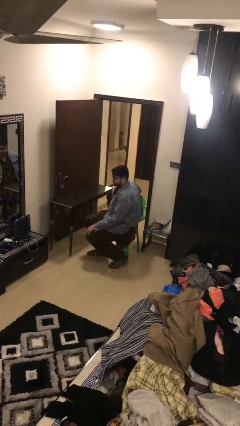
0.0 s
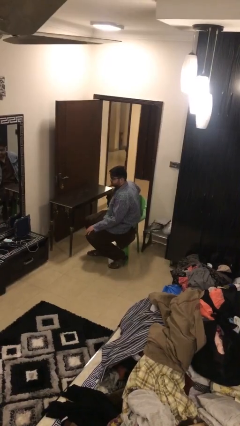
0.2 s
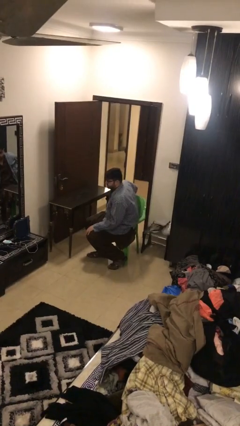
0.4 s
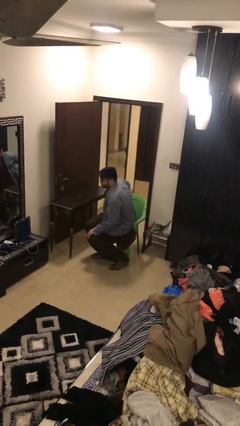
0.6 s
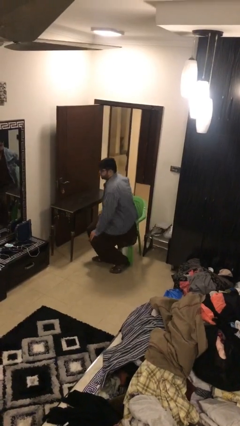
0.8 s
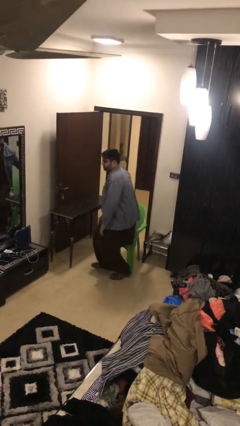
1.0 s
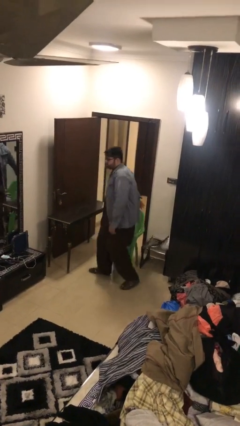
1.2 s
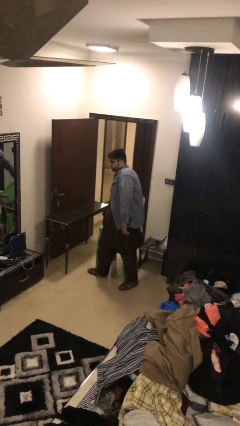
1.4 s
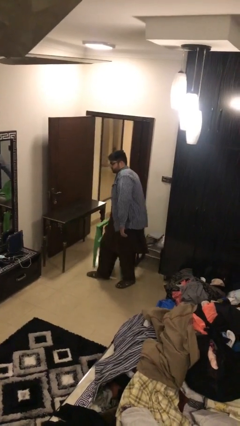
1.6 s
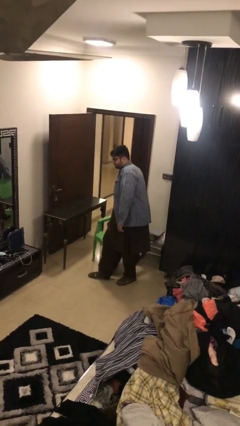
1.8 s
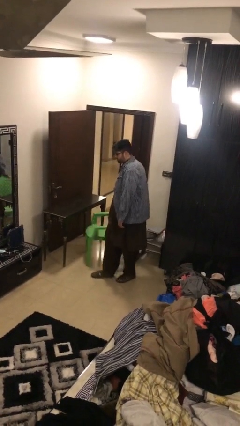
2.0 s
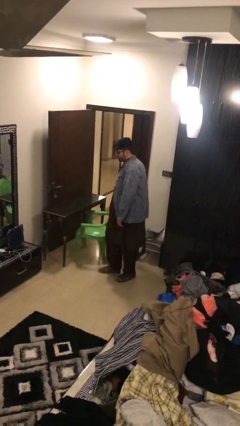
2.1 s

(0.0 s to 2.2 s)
person stands up

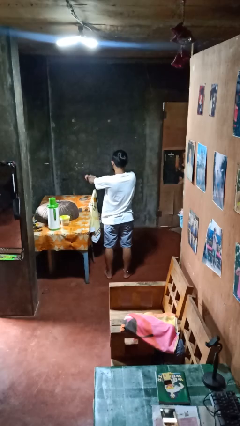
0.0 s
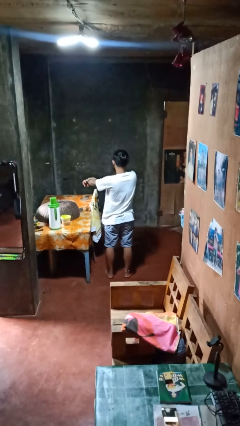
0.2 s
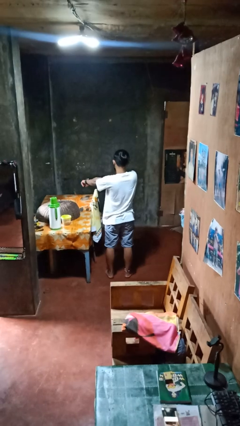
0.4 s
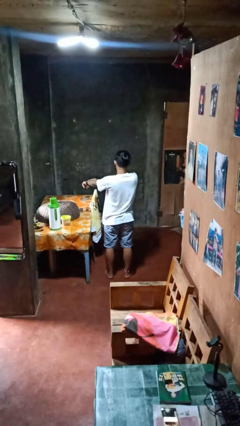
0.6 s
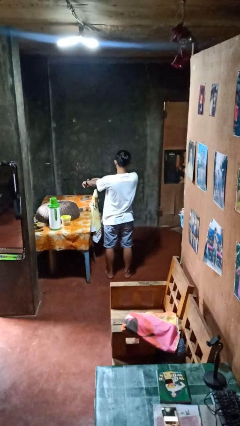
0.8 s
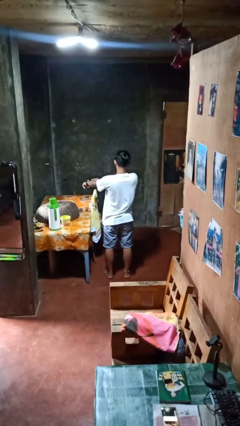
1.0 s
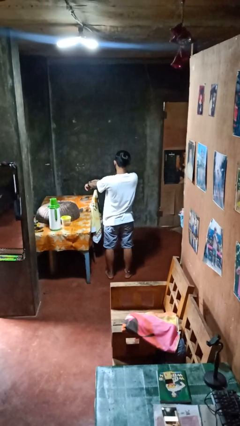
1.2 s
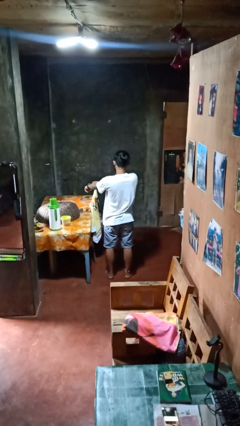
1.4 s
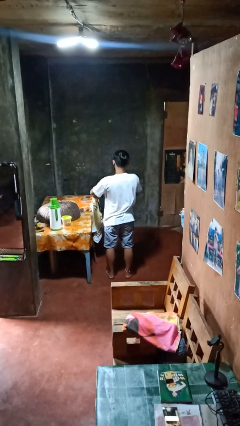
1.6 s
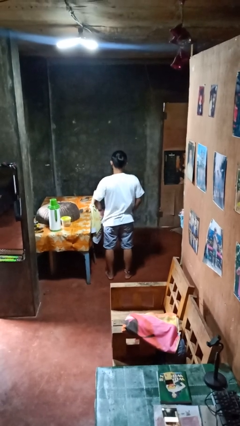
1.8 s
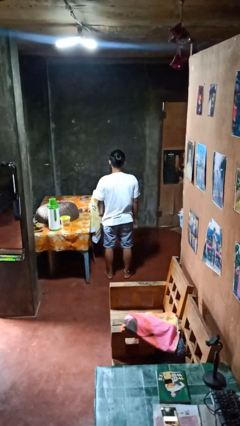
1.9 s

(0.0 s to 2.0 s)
person swats bug

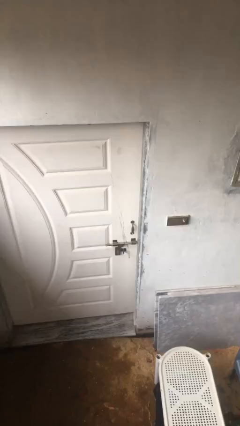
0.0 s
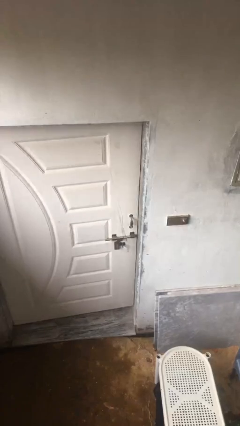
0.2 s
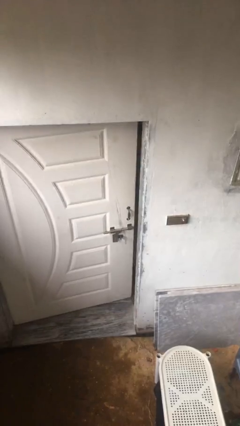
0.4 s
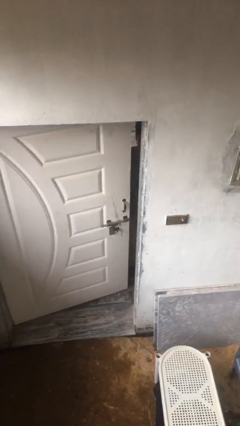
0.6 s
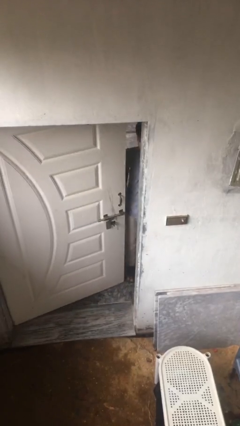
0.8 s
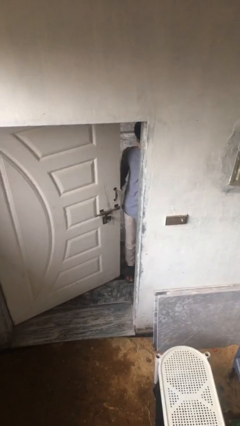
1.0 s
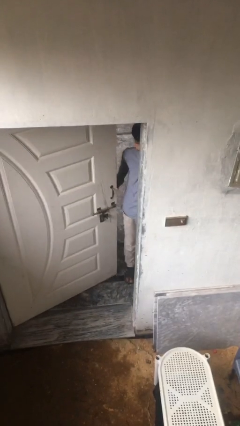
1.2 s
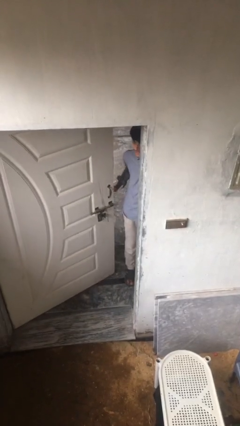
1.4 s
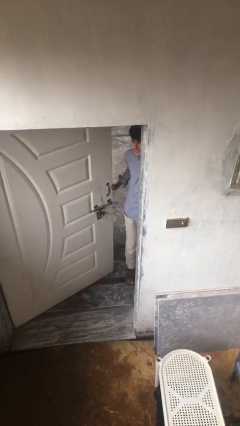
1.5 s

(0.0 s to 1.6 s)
person opens facility door

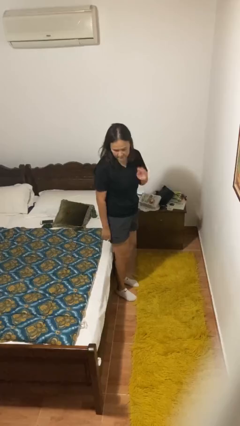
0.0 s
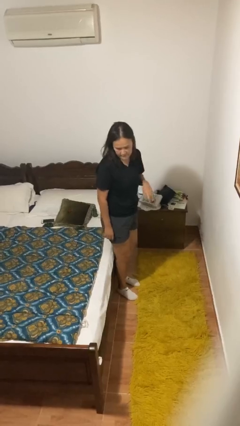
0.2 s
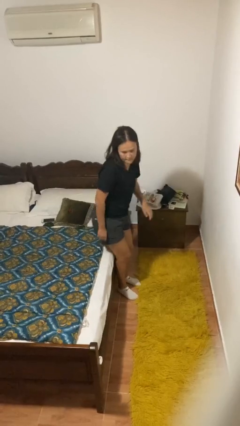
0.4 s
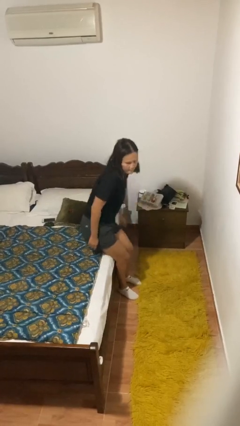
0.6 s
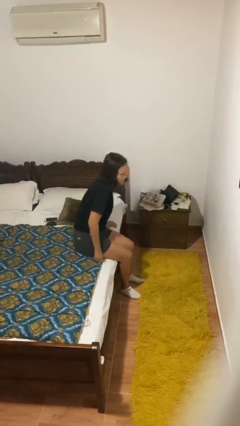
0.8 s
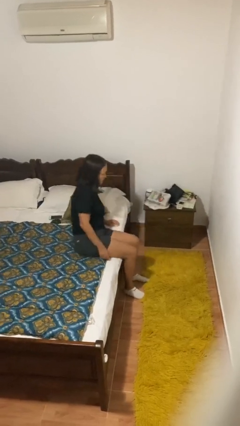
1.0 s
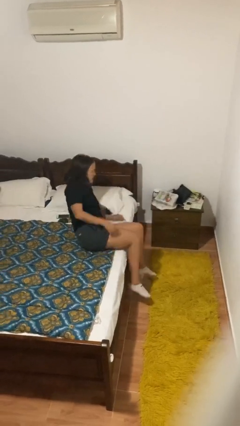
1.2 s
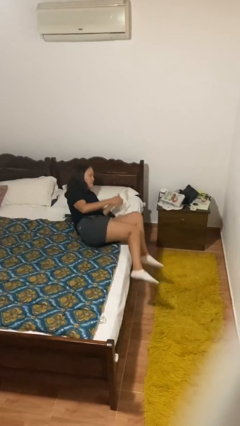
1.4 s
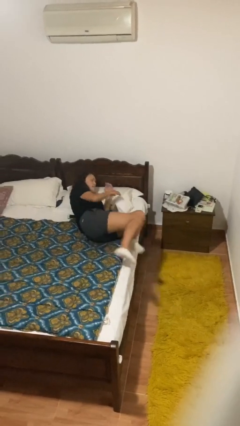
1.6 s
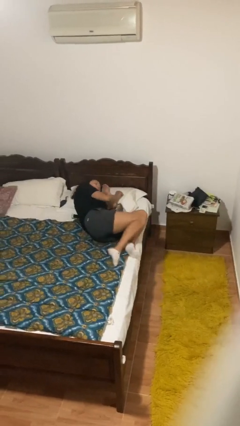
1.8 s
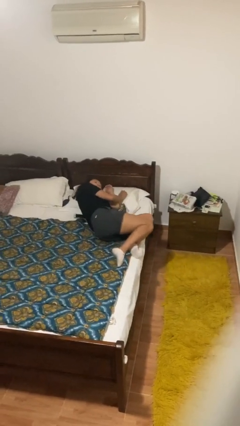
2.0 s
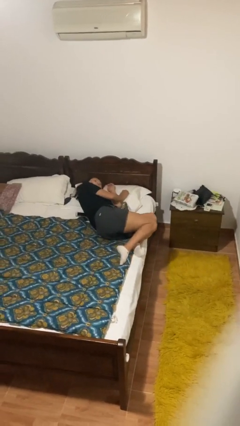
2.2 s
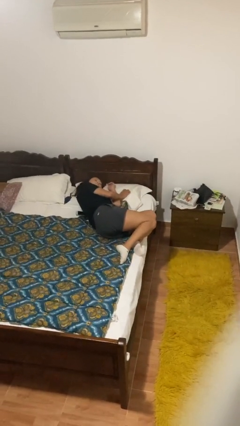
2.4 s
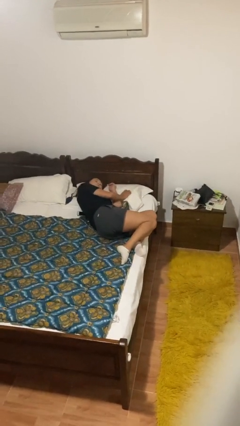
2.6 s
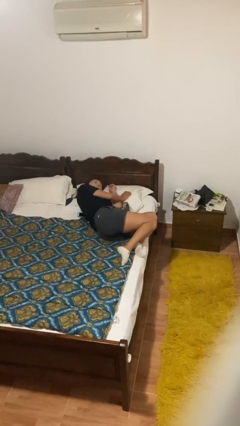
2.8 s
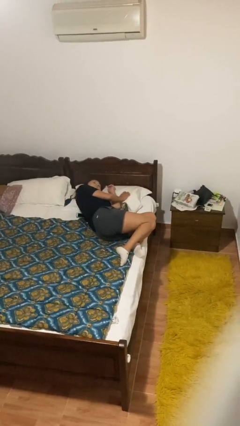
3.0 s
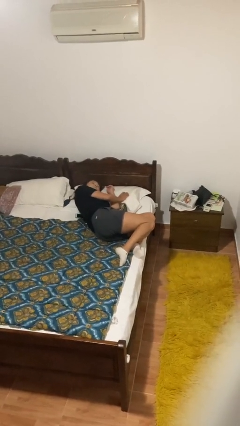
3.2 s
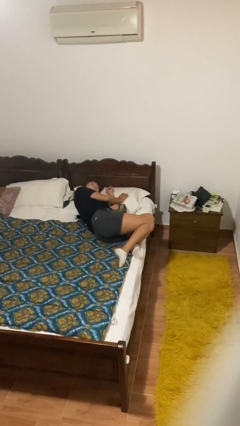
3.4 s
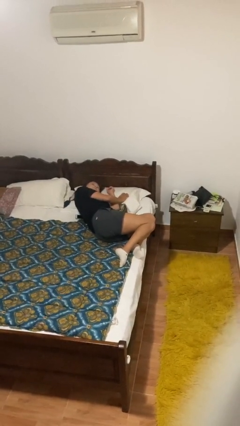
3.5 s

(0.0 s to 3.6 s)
person lies down on bed

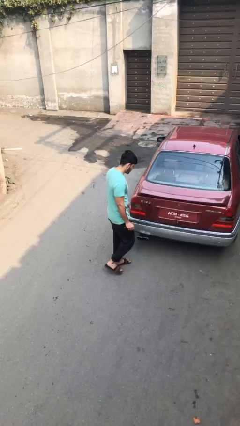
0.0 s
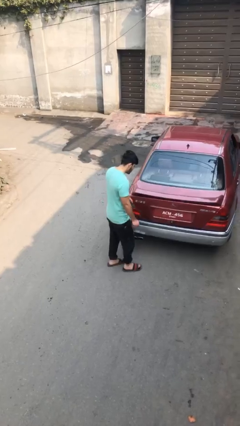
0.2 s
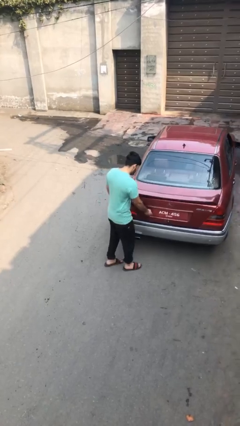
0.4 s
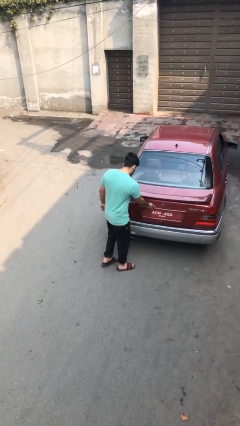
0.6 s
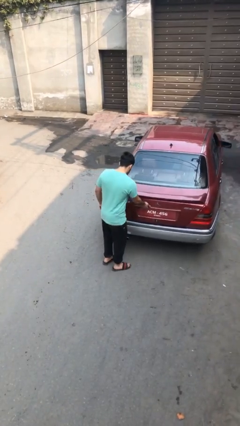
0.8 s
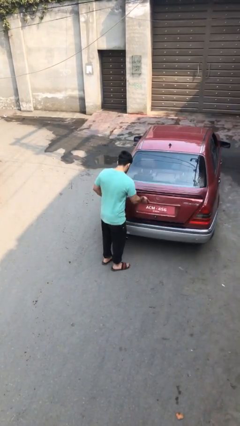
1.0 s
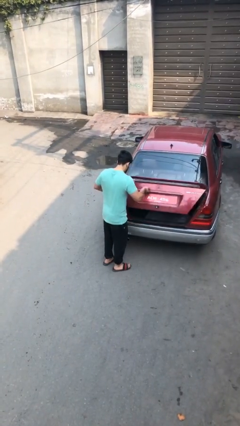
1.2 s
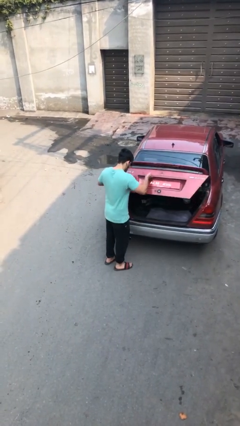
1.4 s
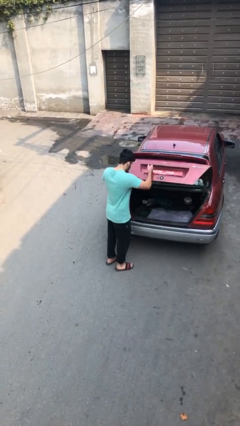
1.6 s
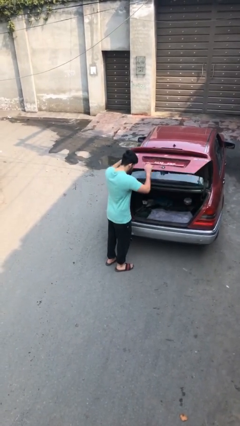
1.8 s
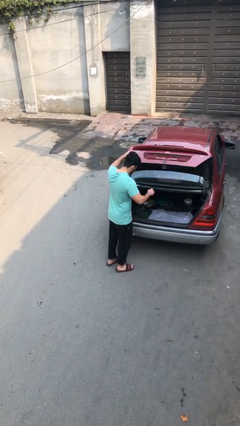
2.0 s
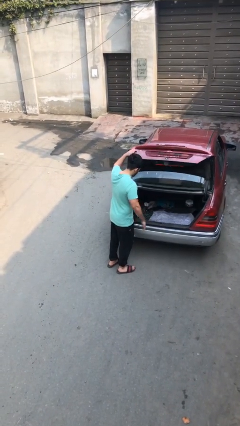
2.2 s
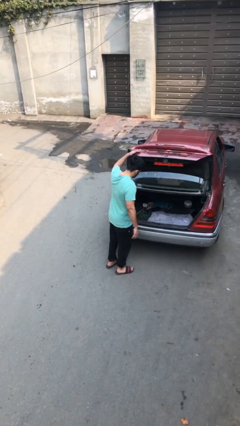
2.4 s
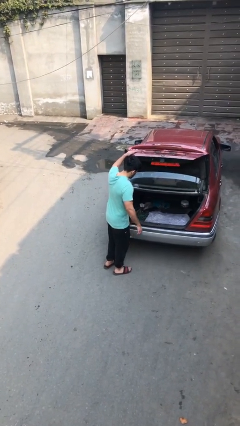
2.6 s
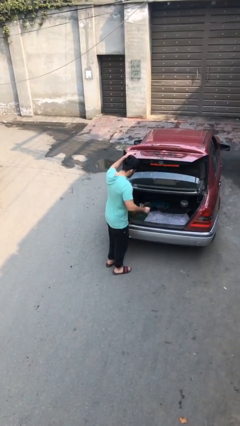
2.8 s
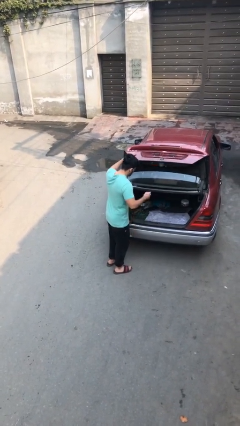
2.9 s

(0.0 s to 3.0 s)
person opens car trunk

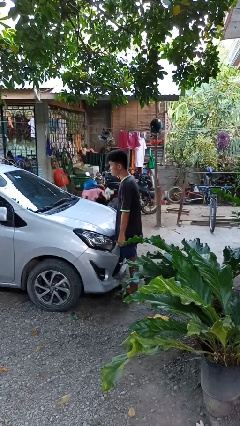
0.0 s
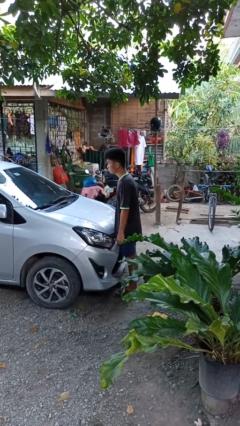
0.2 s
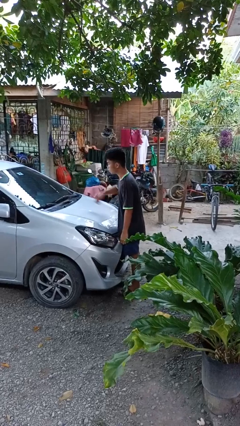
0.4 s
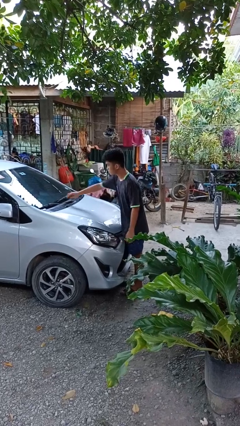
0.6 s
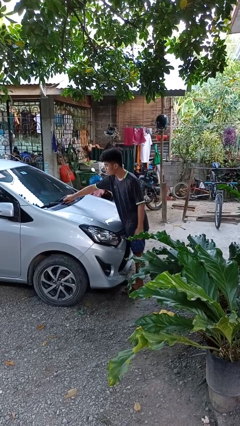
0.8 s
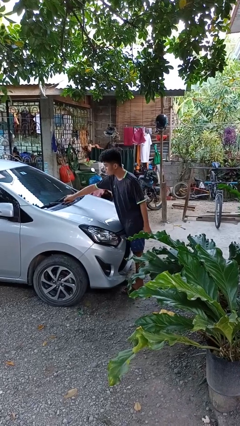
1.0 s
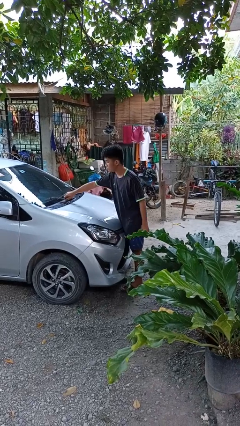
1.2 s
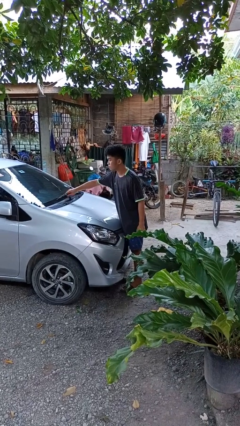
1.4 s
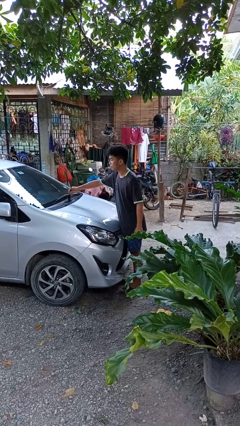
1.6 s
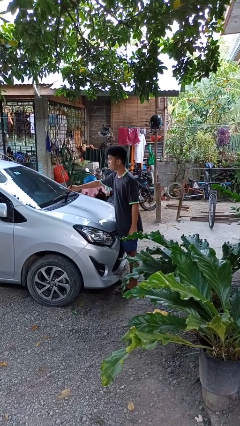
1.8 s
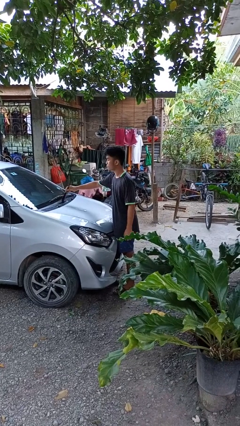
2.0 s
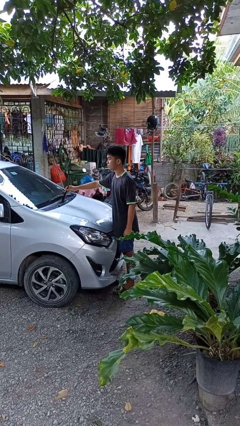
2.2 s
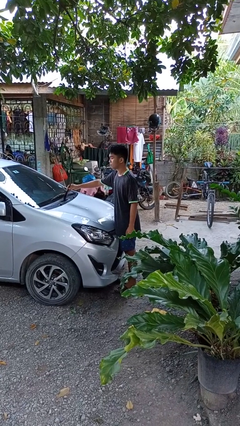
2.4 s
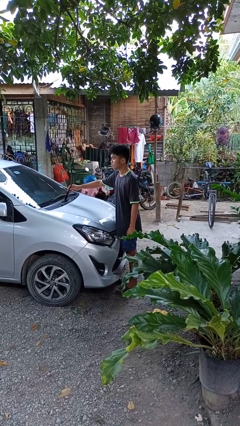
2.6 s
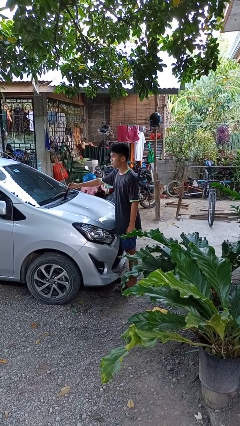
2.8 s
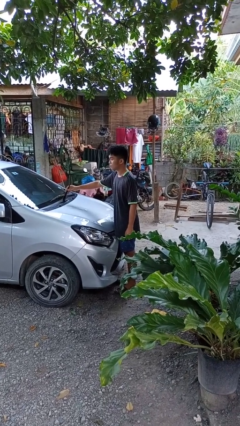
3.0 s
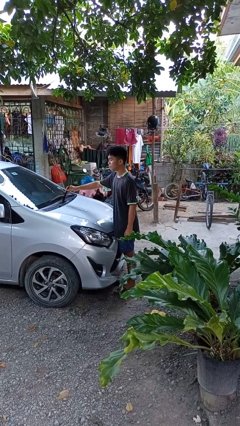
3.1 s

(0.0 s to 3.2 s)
person flips up car wipers

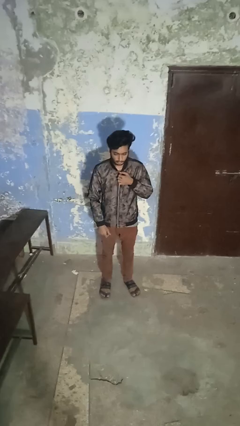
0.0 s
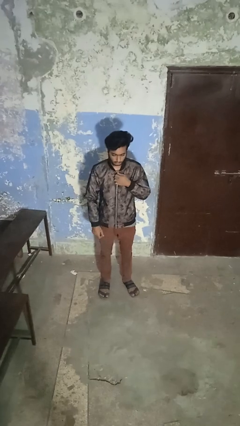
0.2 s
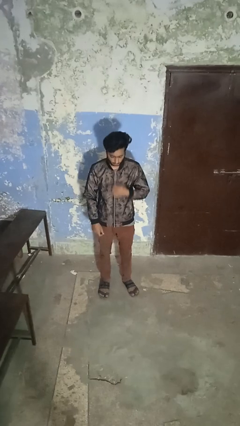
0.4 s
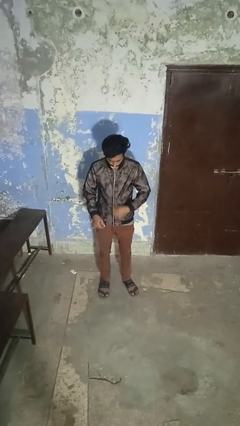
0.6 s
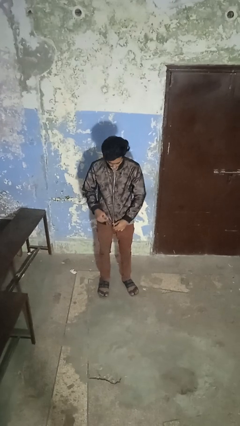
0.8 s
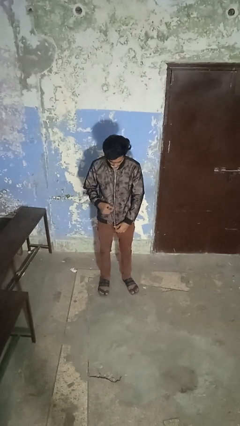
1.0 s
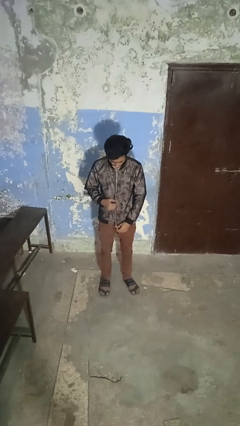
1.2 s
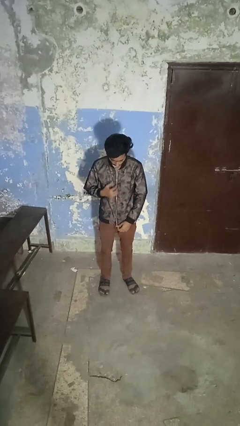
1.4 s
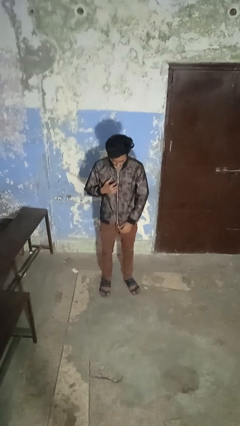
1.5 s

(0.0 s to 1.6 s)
person unzips jacket

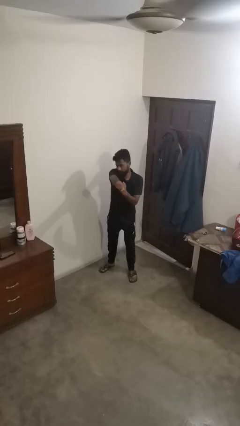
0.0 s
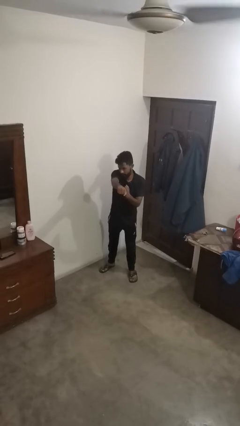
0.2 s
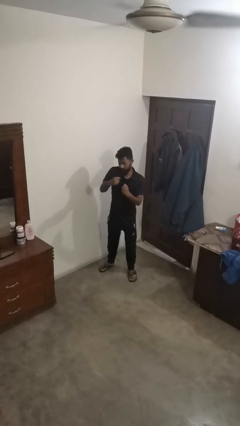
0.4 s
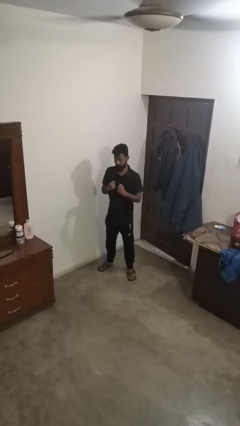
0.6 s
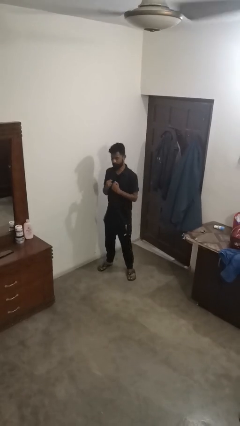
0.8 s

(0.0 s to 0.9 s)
person punches
